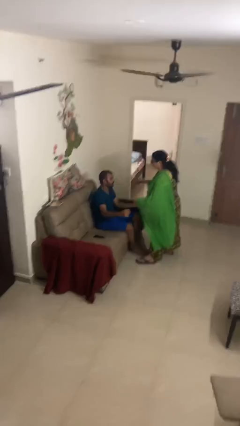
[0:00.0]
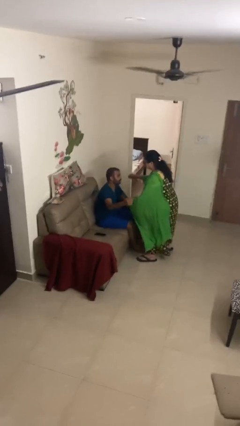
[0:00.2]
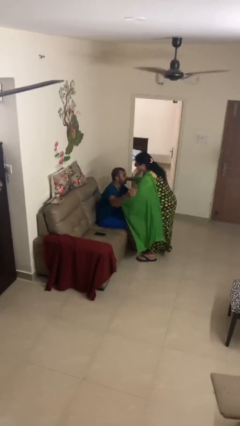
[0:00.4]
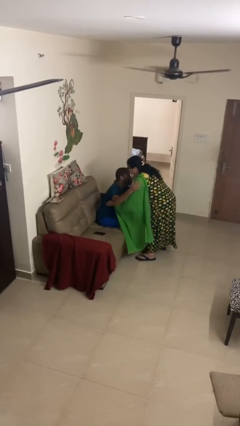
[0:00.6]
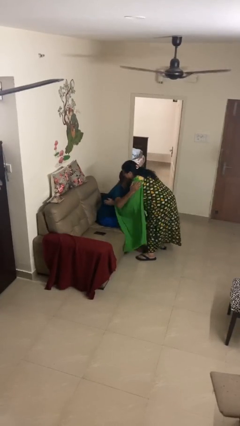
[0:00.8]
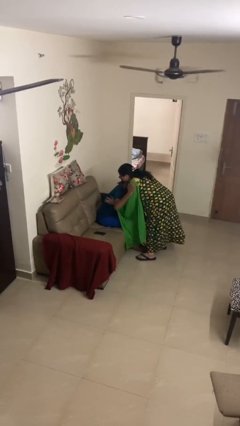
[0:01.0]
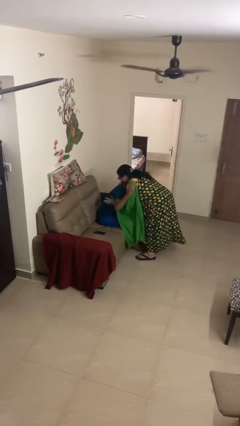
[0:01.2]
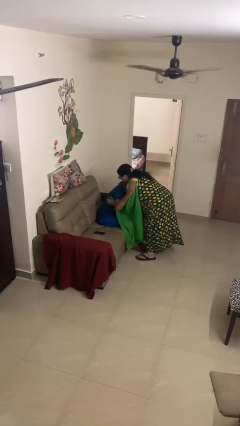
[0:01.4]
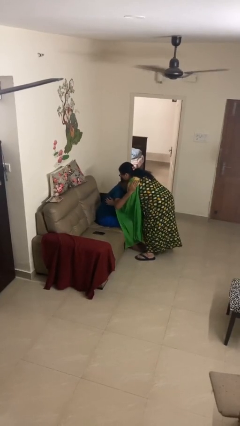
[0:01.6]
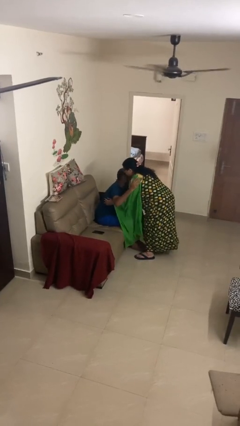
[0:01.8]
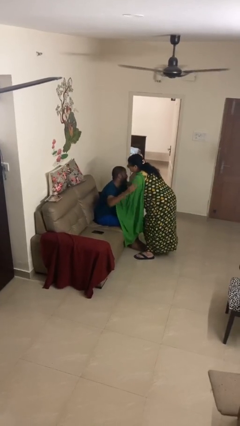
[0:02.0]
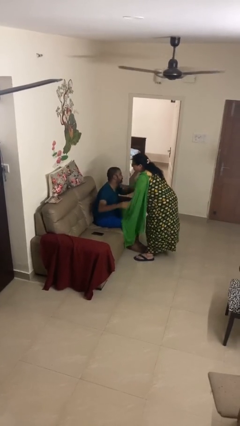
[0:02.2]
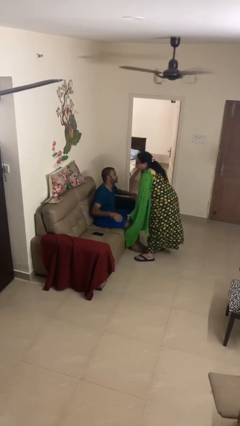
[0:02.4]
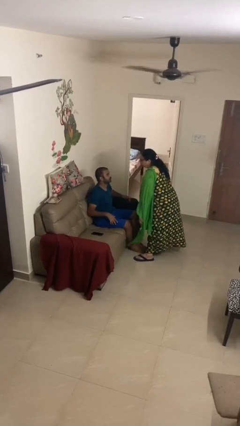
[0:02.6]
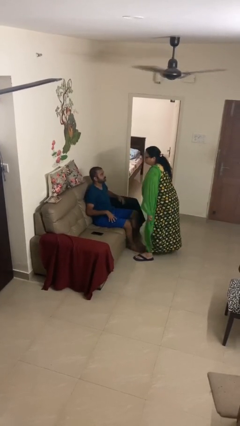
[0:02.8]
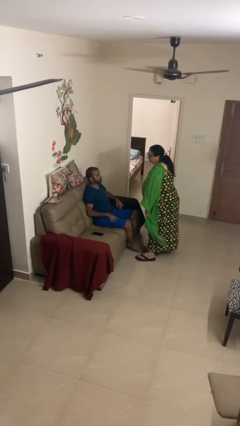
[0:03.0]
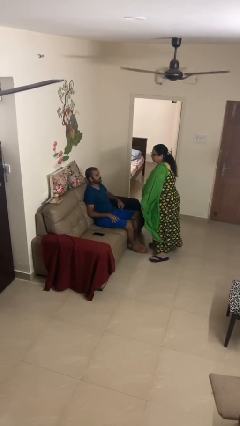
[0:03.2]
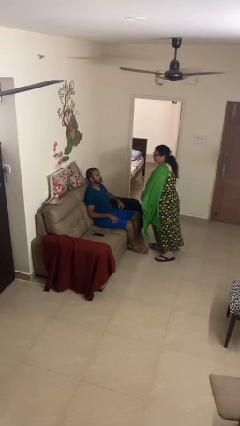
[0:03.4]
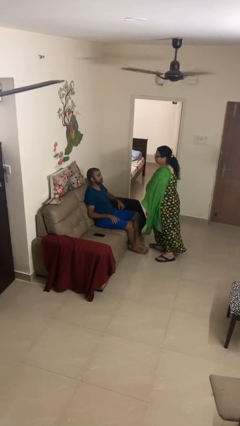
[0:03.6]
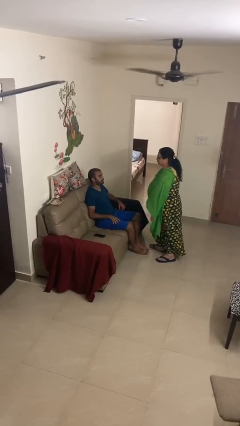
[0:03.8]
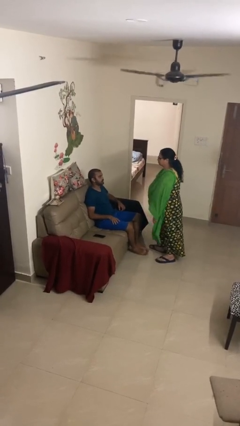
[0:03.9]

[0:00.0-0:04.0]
person embraces person

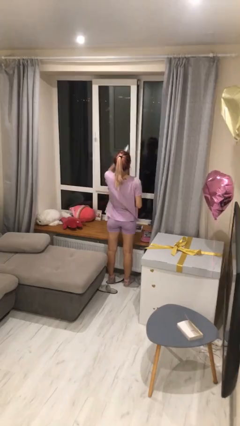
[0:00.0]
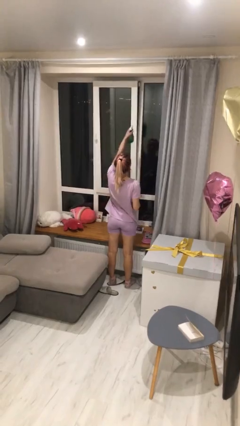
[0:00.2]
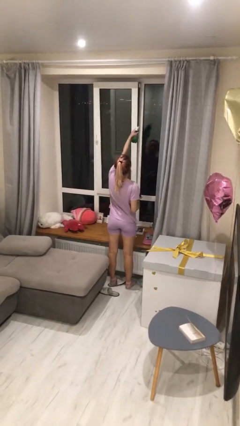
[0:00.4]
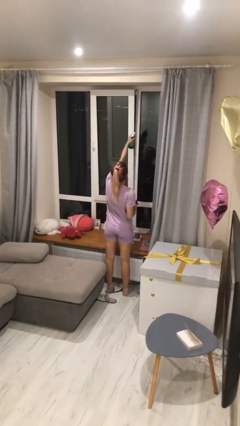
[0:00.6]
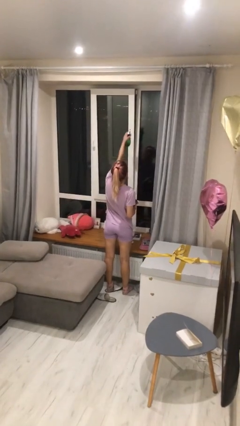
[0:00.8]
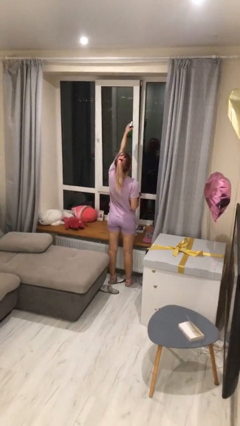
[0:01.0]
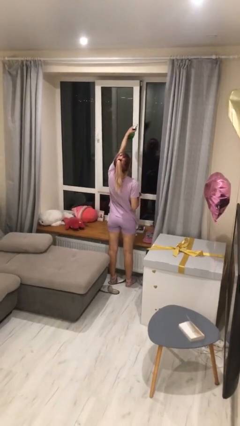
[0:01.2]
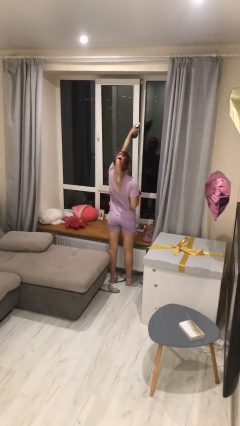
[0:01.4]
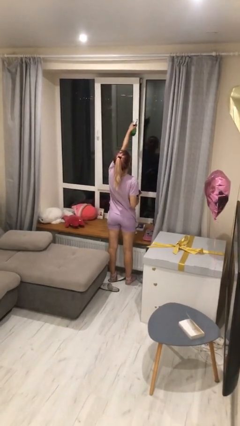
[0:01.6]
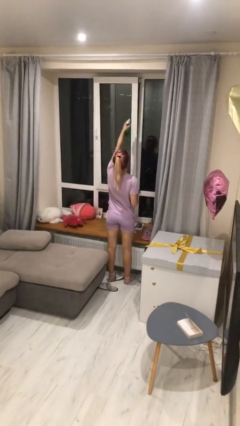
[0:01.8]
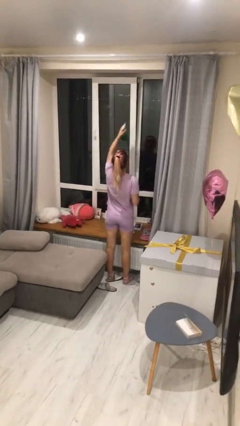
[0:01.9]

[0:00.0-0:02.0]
person sprays from bottle

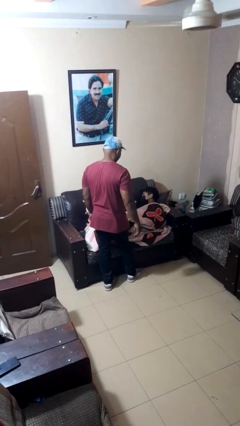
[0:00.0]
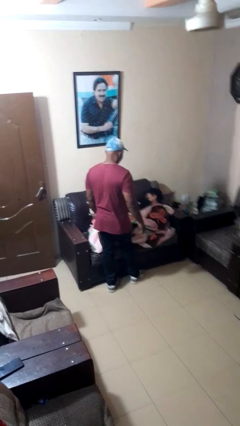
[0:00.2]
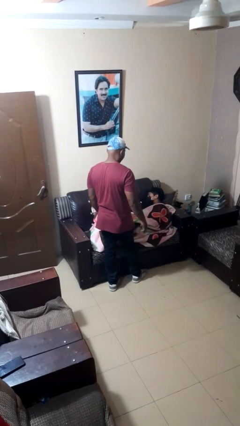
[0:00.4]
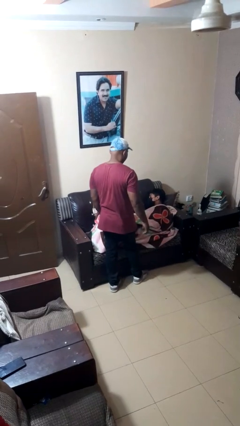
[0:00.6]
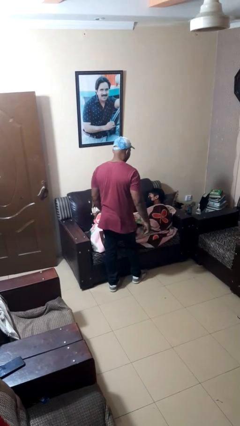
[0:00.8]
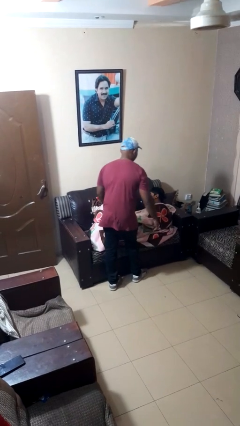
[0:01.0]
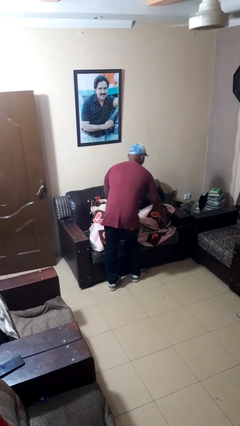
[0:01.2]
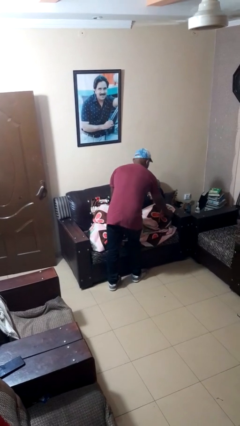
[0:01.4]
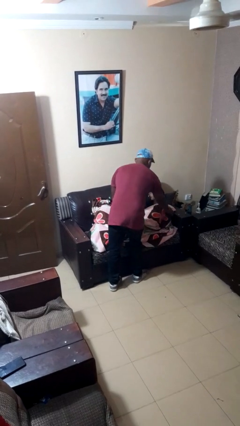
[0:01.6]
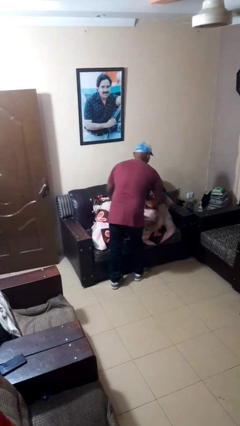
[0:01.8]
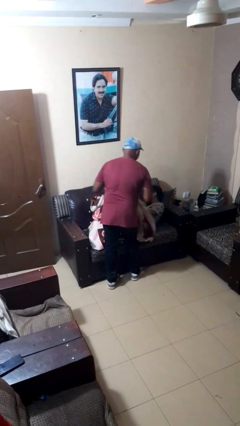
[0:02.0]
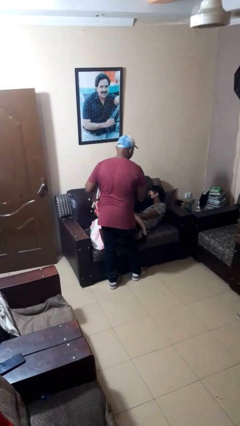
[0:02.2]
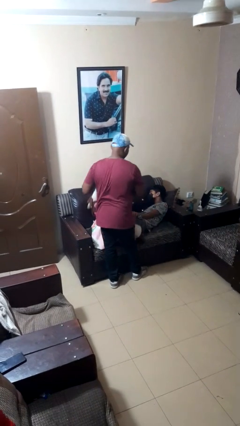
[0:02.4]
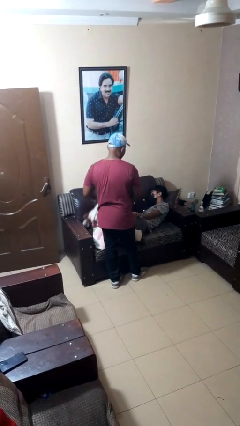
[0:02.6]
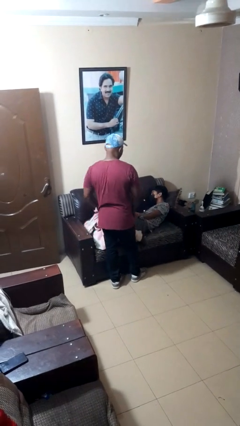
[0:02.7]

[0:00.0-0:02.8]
person uncovers friend with blanket

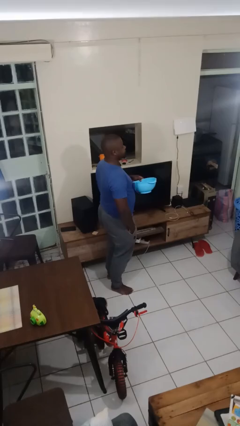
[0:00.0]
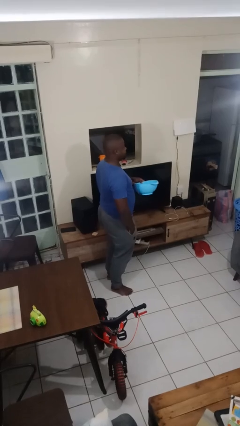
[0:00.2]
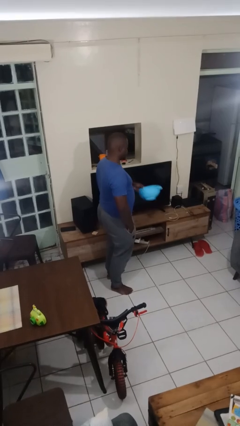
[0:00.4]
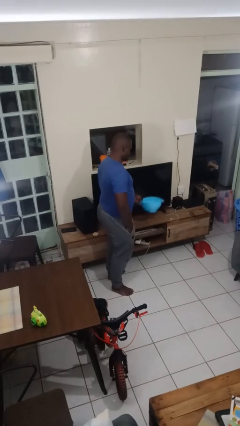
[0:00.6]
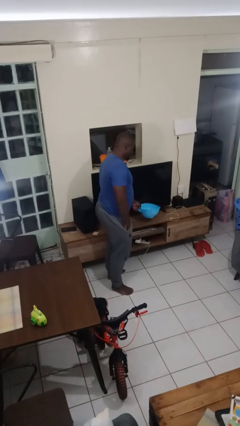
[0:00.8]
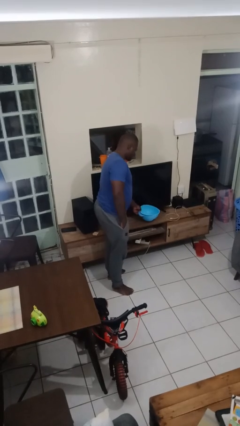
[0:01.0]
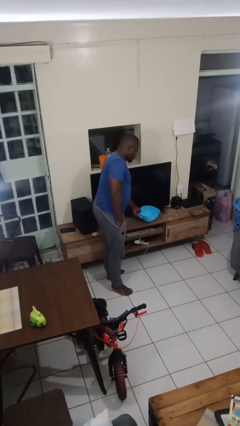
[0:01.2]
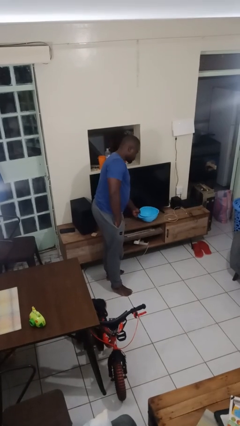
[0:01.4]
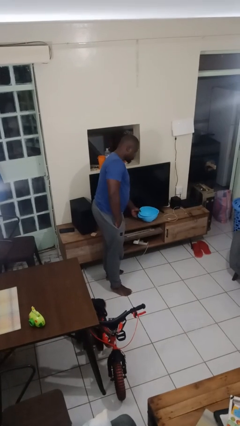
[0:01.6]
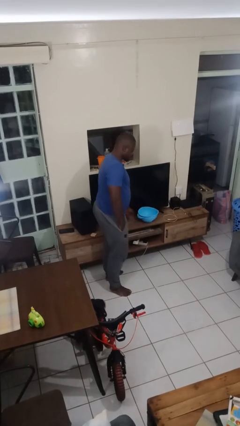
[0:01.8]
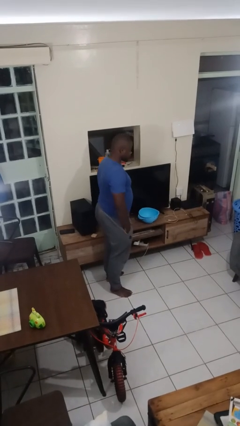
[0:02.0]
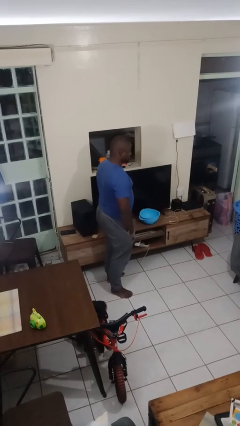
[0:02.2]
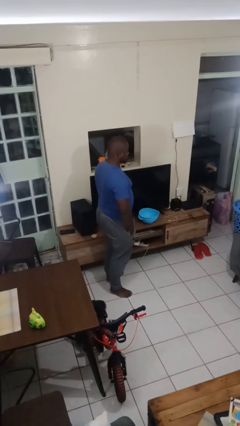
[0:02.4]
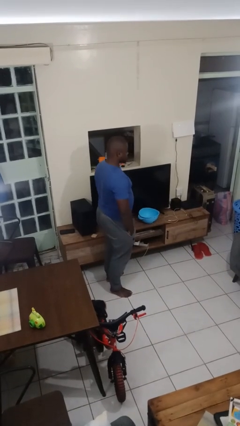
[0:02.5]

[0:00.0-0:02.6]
person puts down object on countertop

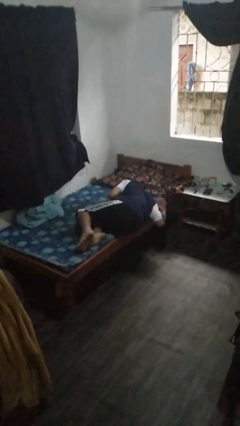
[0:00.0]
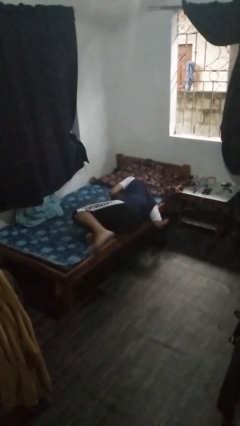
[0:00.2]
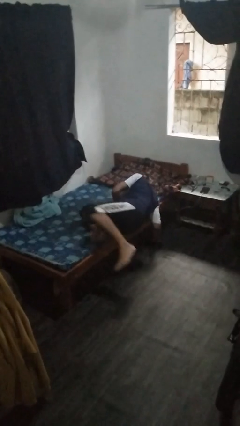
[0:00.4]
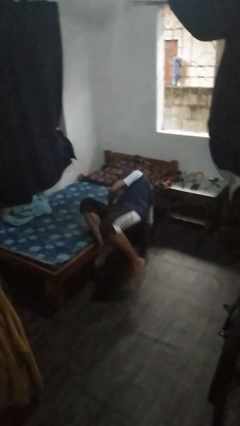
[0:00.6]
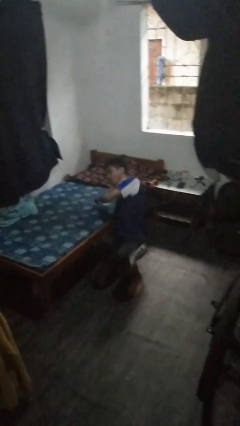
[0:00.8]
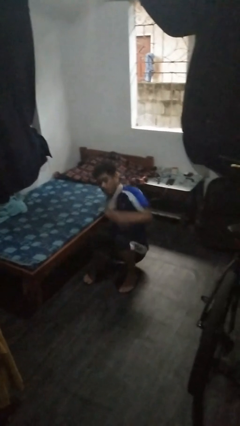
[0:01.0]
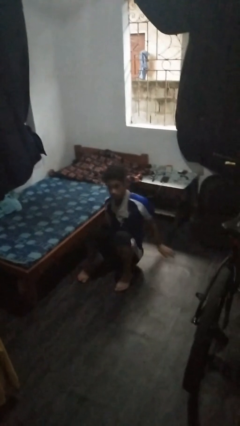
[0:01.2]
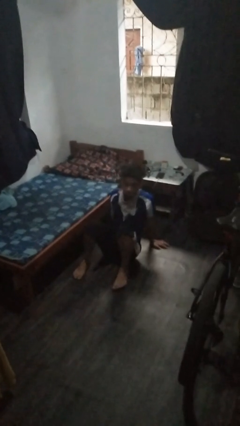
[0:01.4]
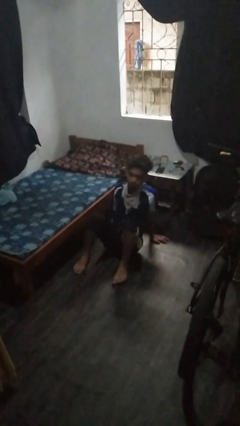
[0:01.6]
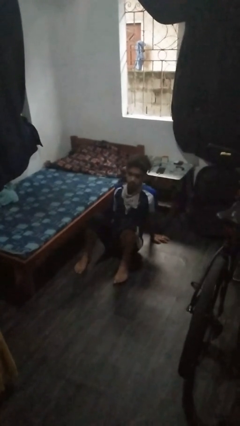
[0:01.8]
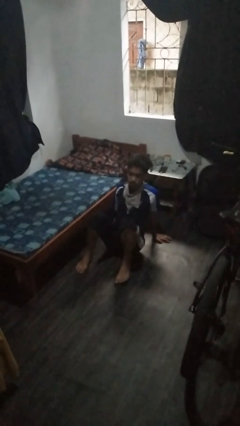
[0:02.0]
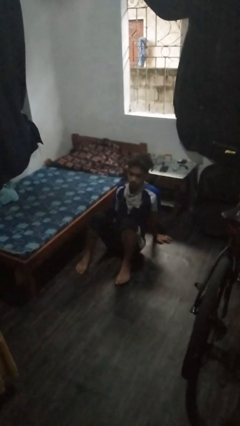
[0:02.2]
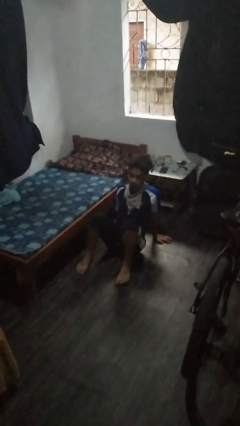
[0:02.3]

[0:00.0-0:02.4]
person falls from bed

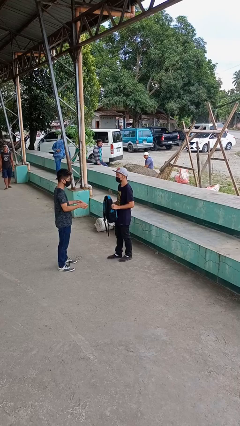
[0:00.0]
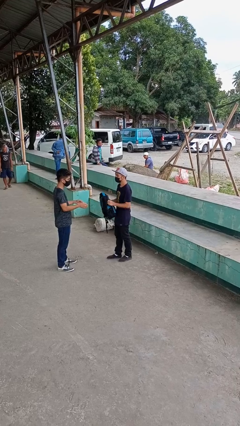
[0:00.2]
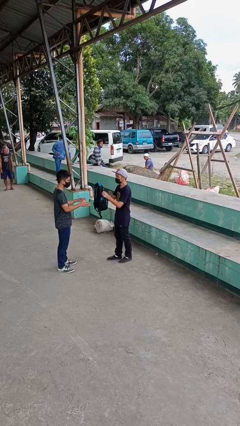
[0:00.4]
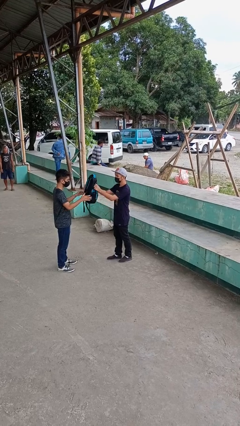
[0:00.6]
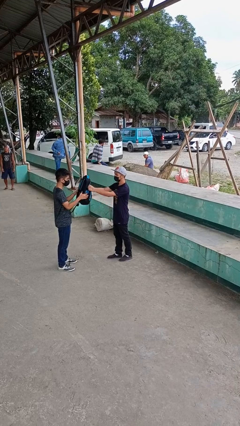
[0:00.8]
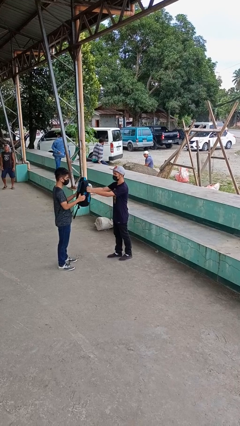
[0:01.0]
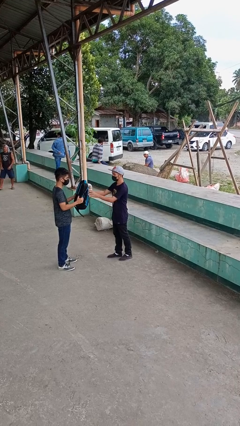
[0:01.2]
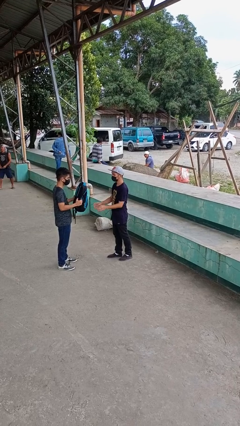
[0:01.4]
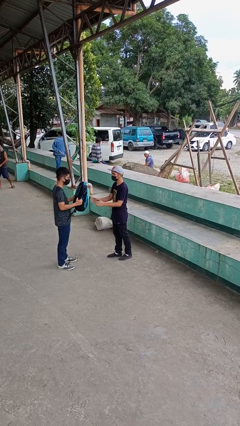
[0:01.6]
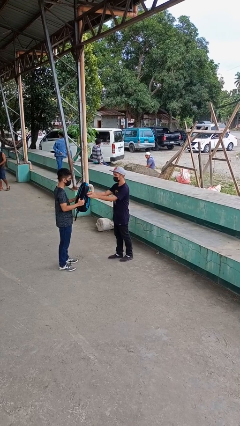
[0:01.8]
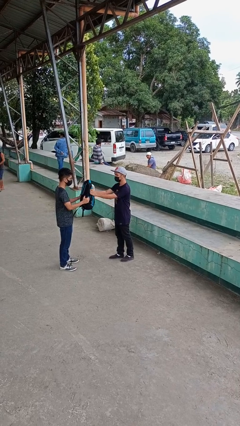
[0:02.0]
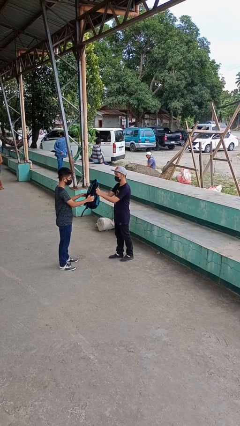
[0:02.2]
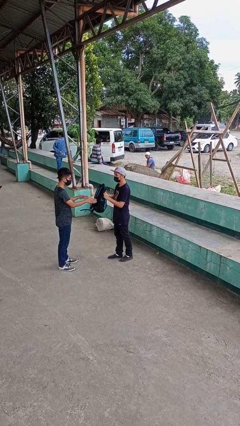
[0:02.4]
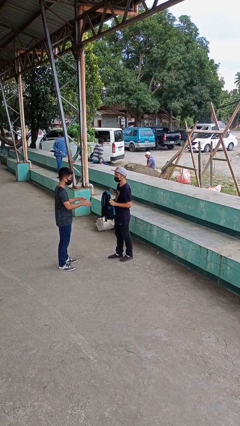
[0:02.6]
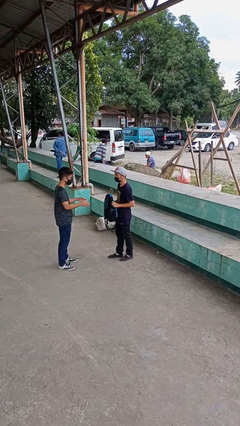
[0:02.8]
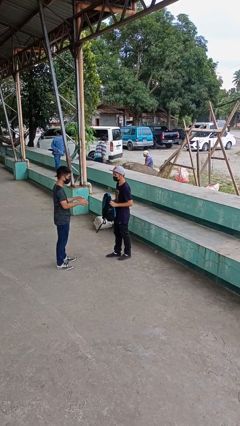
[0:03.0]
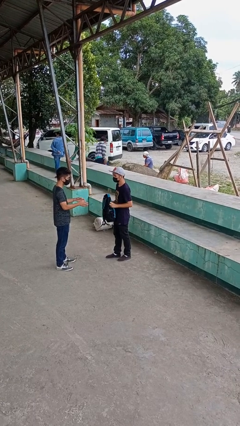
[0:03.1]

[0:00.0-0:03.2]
person transfers object to person

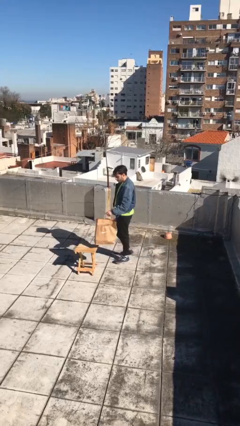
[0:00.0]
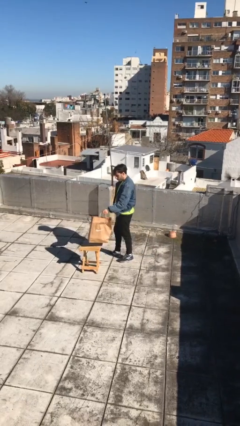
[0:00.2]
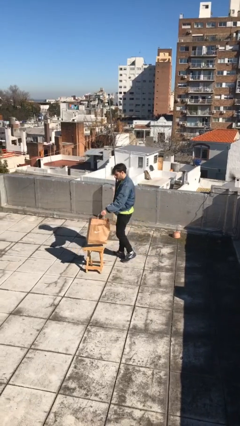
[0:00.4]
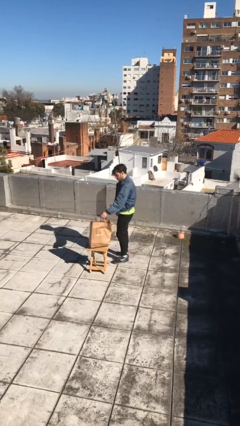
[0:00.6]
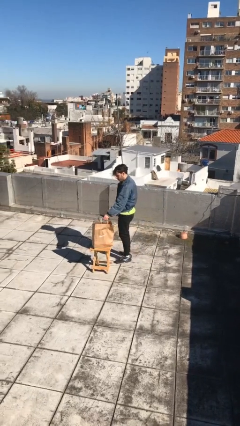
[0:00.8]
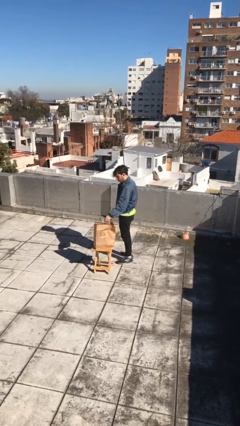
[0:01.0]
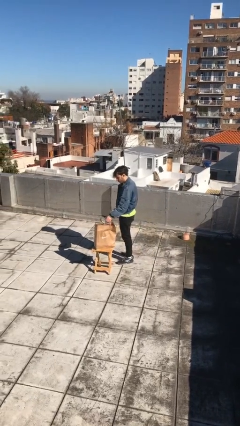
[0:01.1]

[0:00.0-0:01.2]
person puts down object on table
